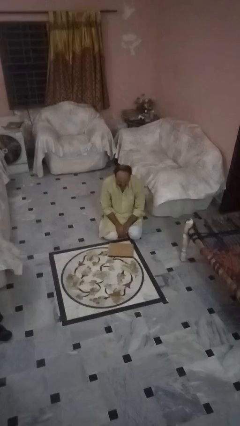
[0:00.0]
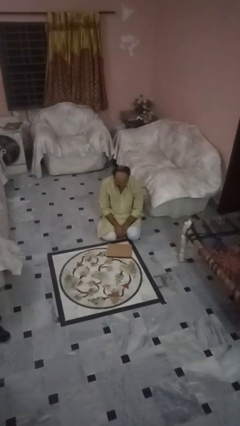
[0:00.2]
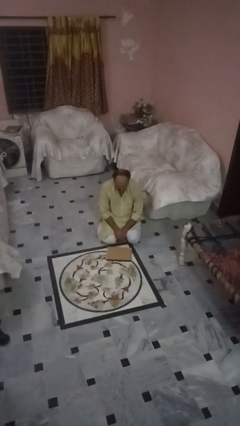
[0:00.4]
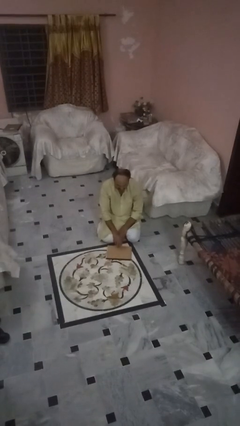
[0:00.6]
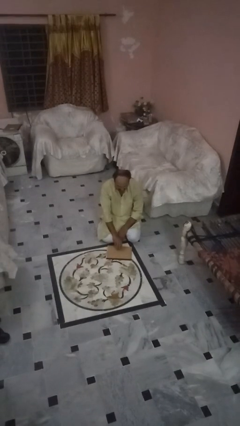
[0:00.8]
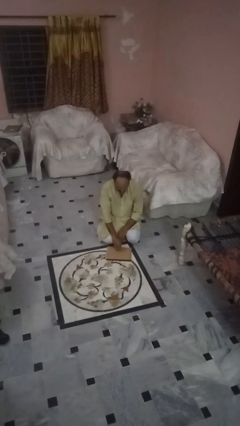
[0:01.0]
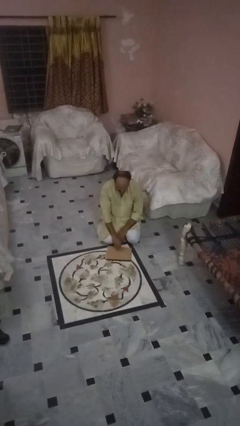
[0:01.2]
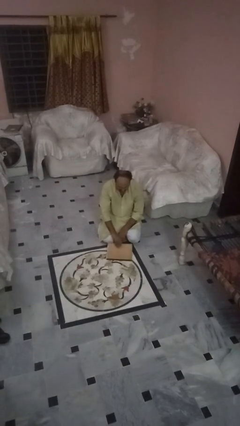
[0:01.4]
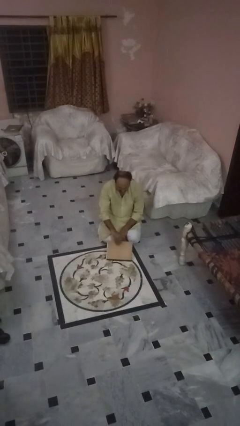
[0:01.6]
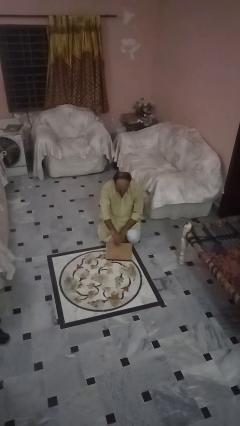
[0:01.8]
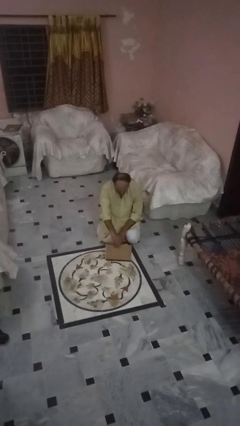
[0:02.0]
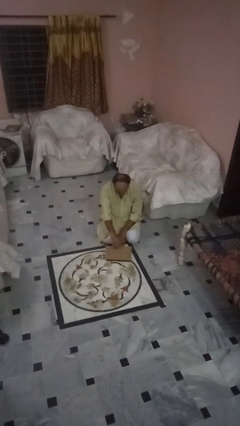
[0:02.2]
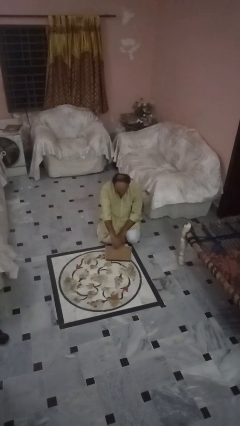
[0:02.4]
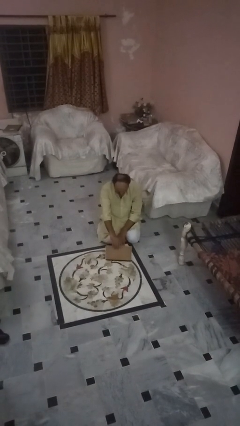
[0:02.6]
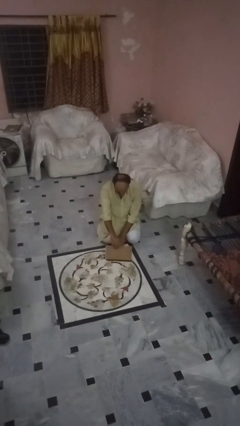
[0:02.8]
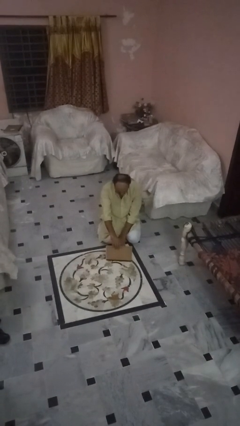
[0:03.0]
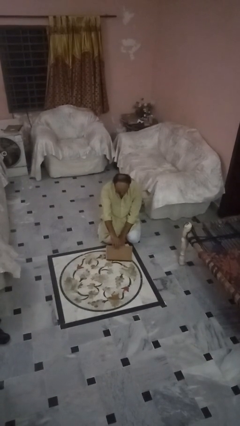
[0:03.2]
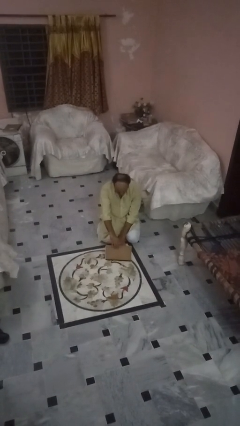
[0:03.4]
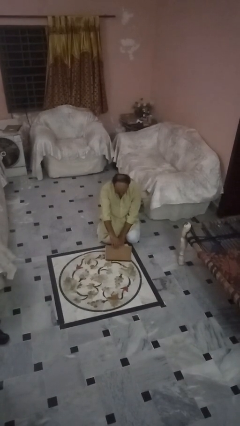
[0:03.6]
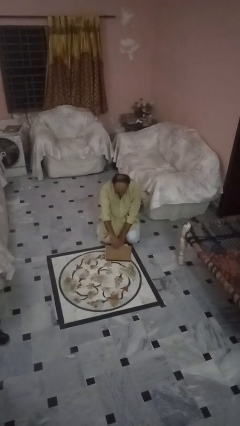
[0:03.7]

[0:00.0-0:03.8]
person opens laptop

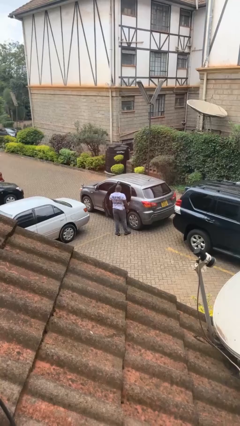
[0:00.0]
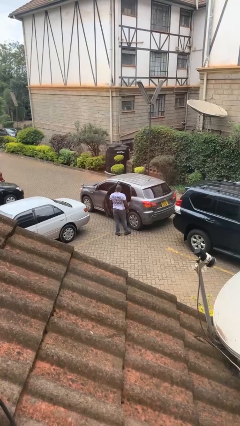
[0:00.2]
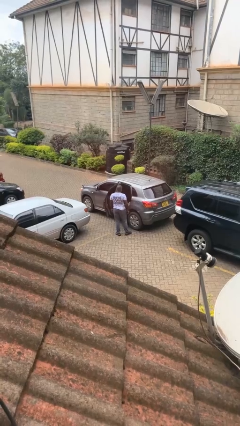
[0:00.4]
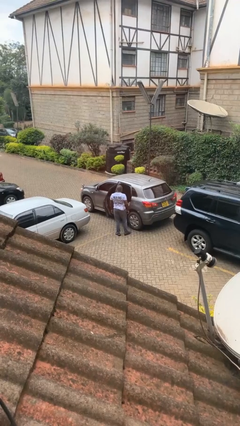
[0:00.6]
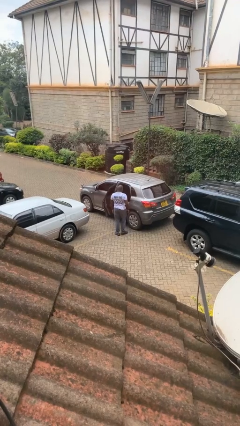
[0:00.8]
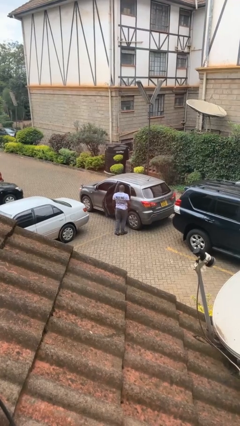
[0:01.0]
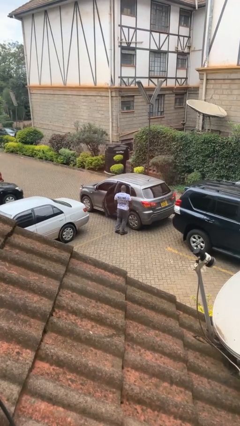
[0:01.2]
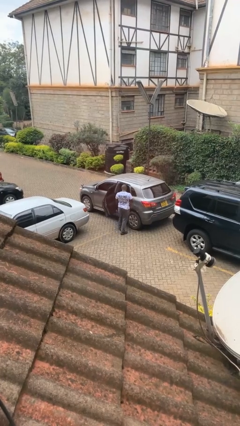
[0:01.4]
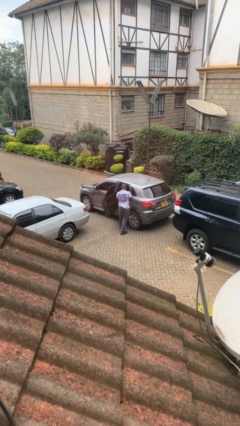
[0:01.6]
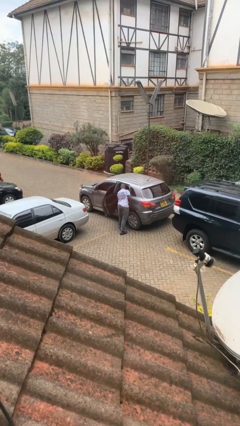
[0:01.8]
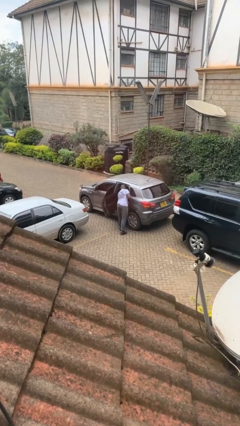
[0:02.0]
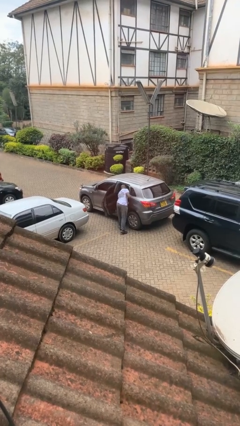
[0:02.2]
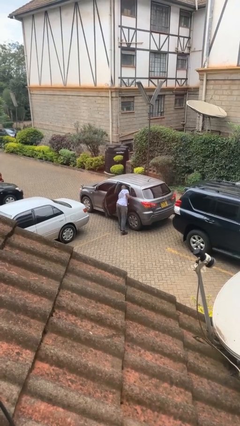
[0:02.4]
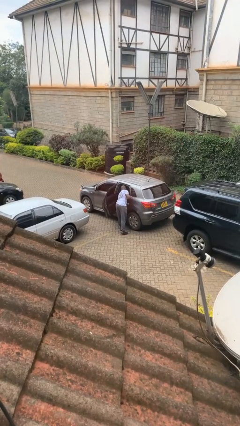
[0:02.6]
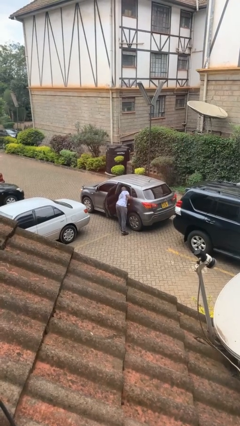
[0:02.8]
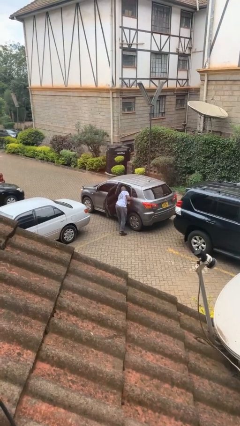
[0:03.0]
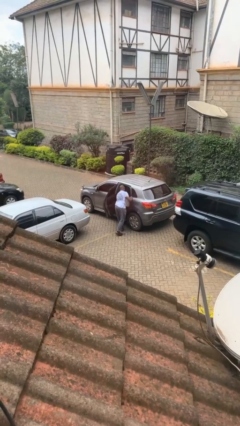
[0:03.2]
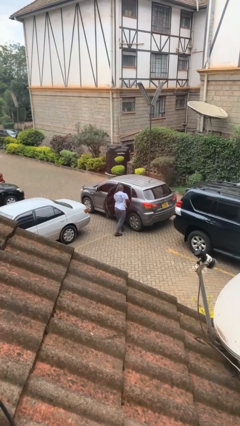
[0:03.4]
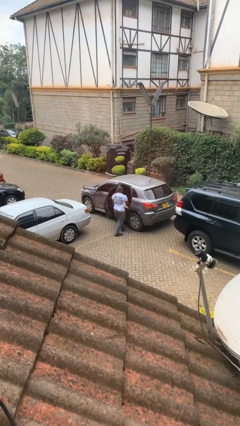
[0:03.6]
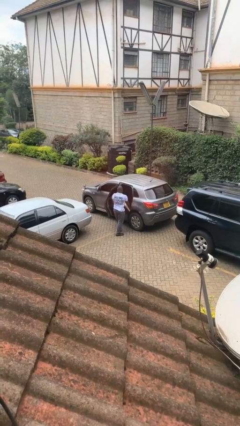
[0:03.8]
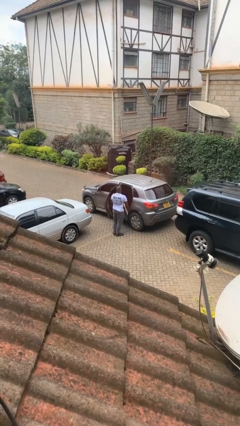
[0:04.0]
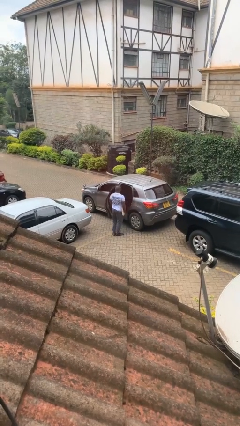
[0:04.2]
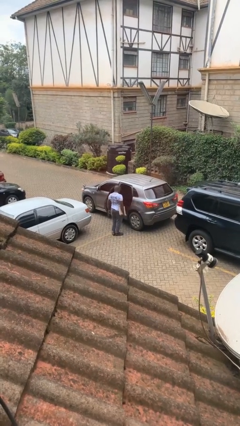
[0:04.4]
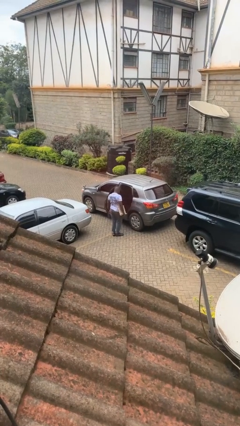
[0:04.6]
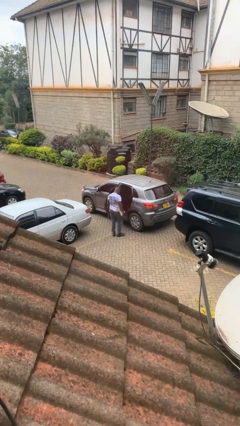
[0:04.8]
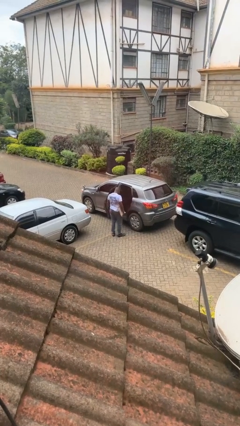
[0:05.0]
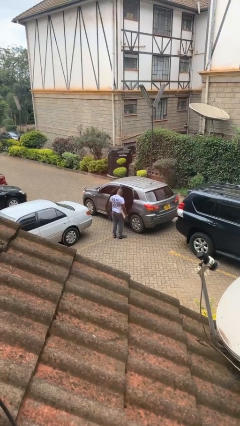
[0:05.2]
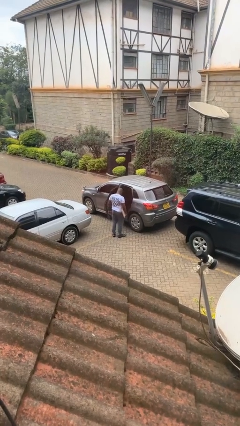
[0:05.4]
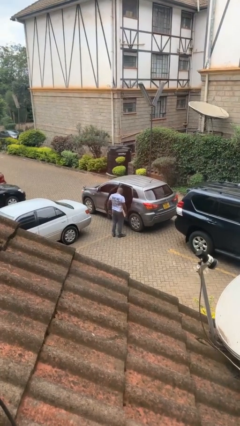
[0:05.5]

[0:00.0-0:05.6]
person unloads car

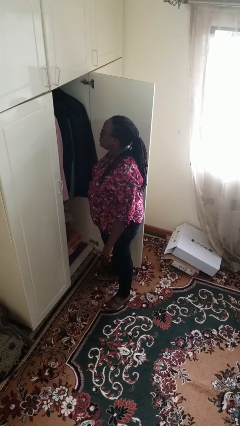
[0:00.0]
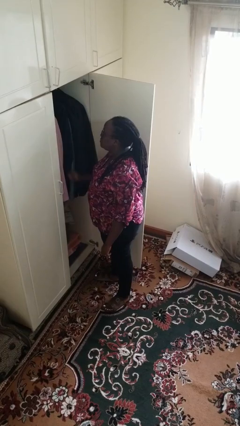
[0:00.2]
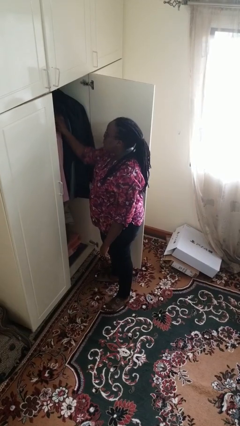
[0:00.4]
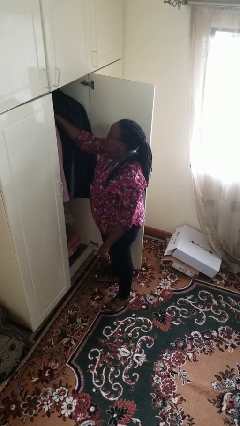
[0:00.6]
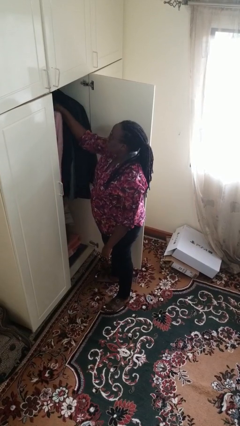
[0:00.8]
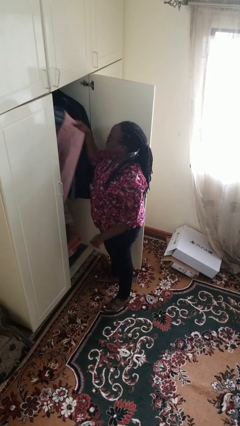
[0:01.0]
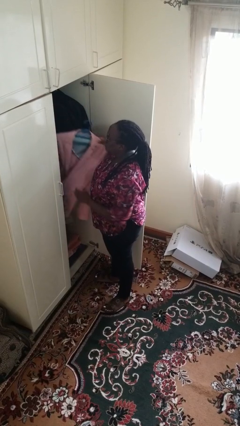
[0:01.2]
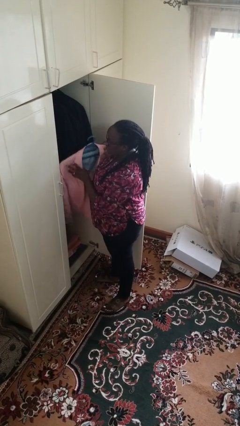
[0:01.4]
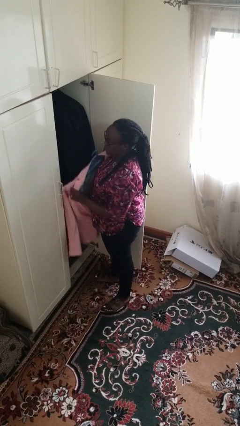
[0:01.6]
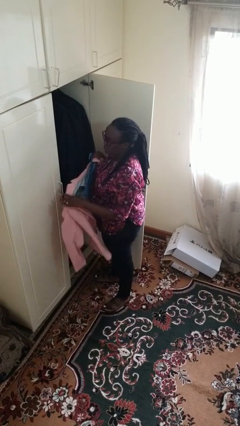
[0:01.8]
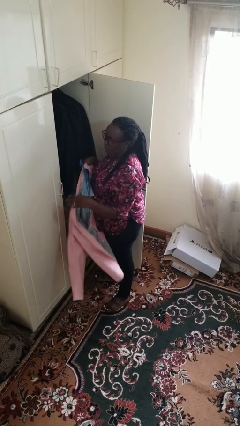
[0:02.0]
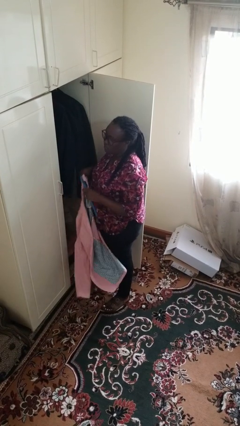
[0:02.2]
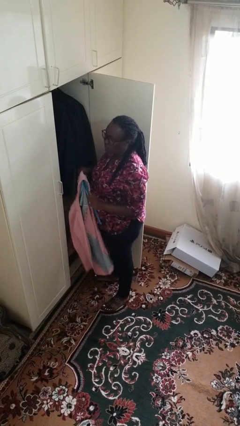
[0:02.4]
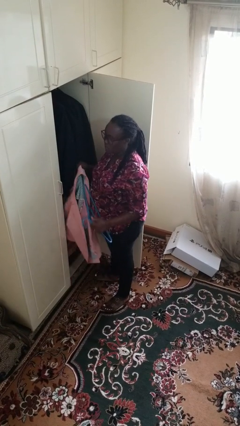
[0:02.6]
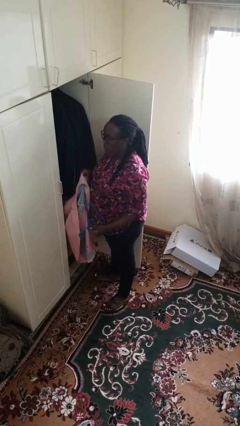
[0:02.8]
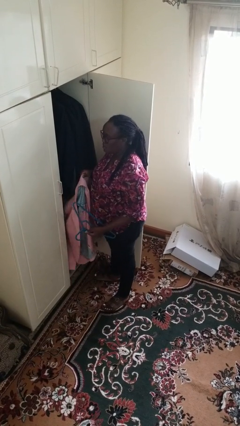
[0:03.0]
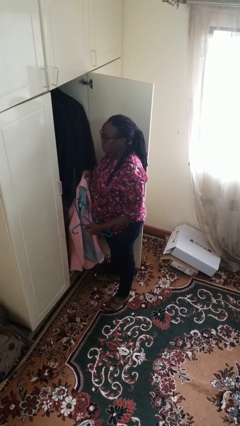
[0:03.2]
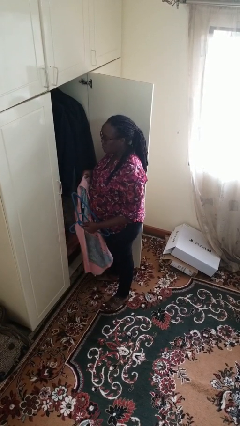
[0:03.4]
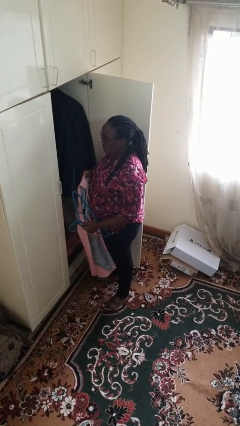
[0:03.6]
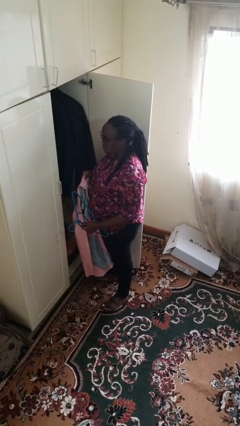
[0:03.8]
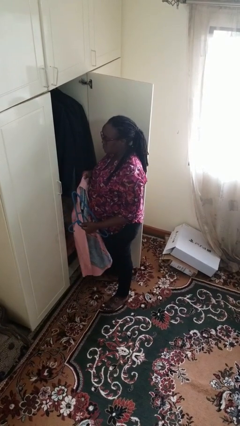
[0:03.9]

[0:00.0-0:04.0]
person takes clothes from closet

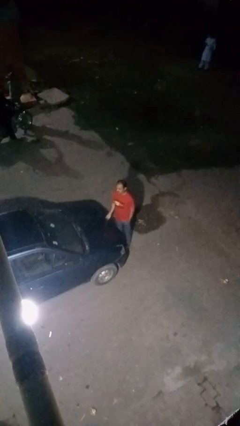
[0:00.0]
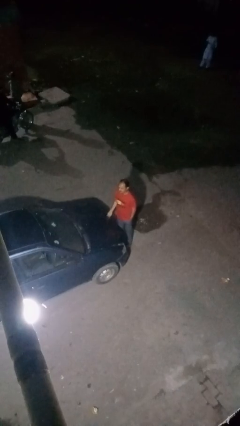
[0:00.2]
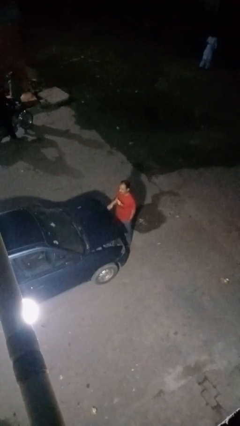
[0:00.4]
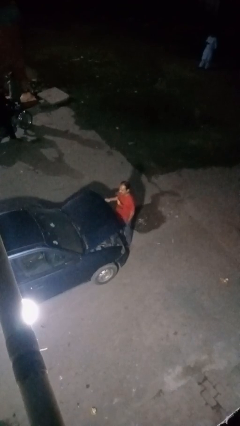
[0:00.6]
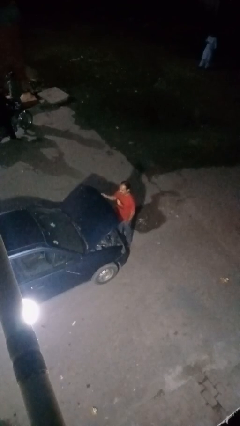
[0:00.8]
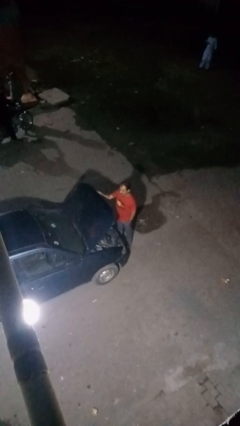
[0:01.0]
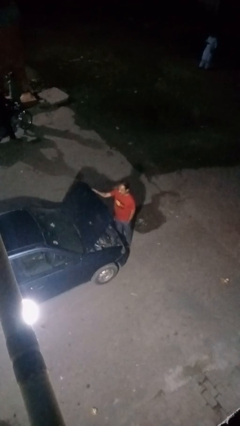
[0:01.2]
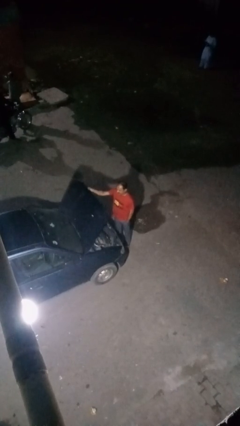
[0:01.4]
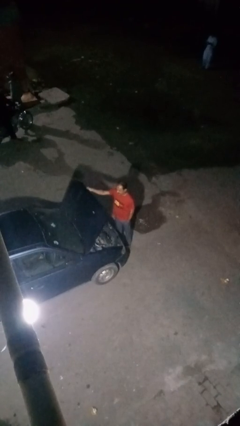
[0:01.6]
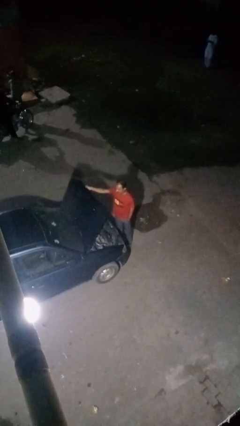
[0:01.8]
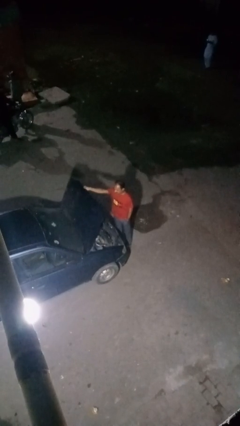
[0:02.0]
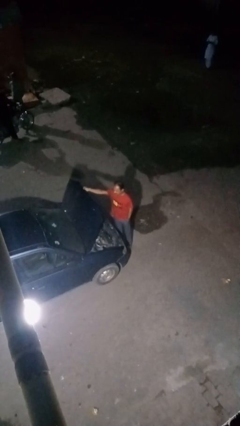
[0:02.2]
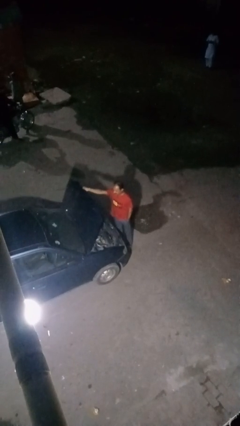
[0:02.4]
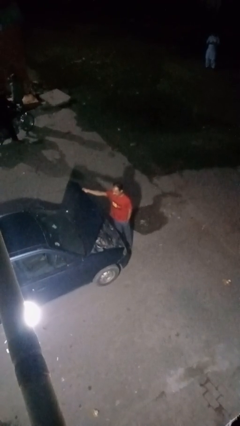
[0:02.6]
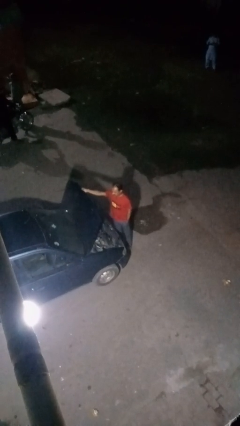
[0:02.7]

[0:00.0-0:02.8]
person opens car hood

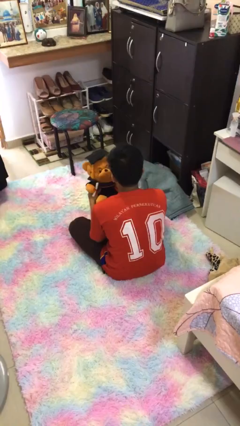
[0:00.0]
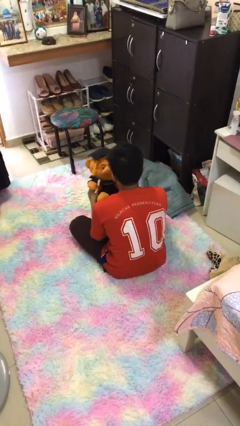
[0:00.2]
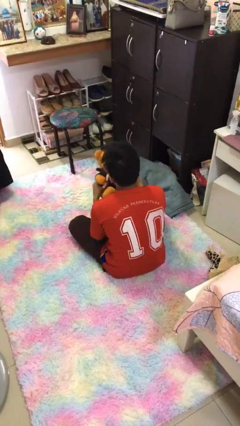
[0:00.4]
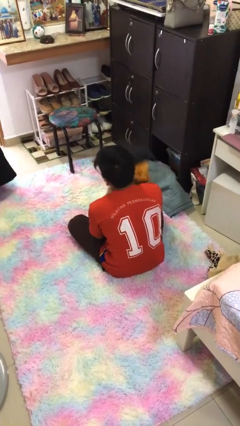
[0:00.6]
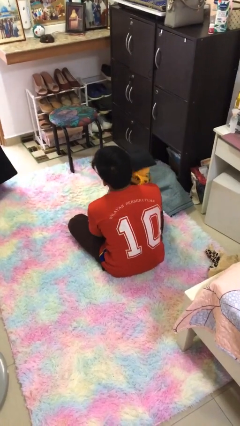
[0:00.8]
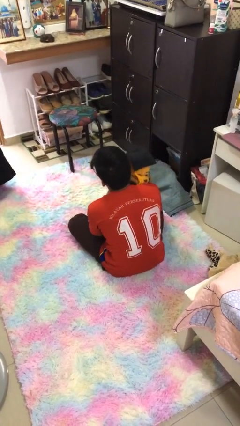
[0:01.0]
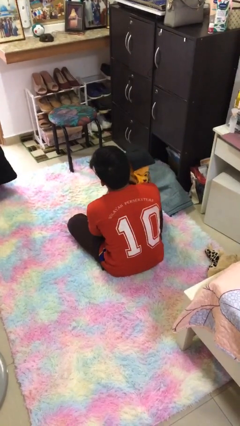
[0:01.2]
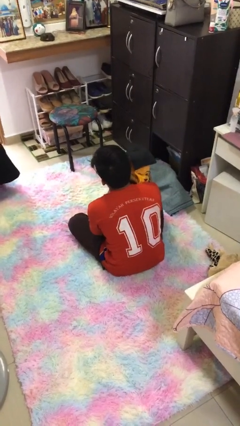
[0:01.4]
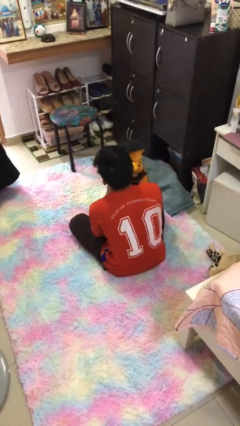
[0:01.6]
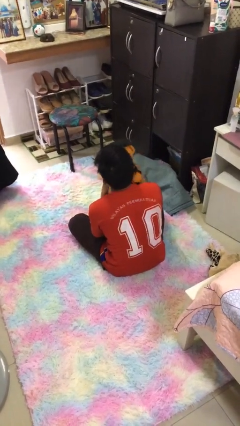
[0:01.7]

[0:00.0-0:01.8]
person hugs stuffed animal
